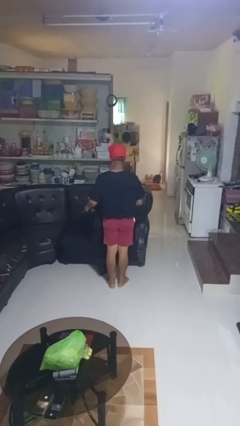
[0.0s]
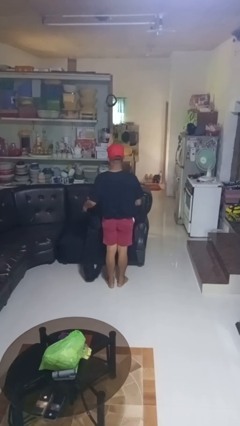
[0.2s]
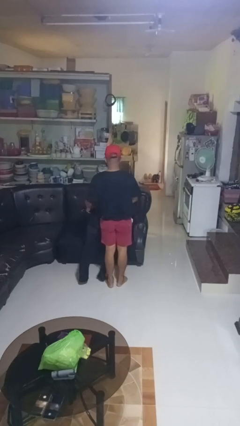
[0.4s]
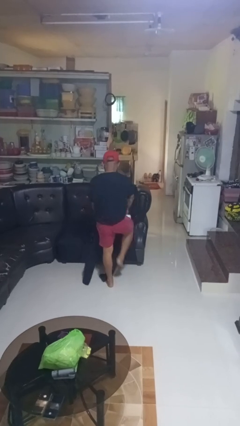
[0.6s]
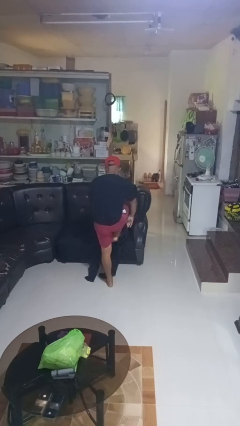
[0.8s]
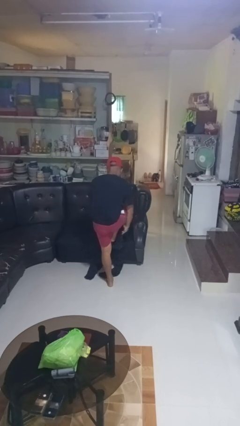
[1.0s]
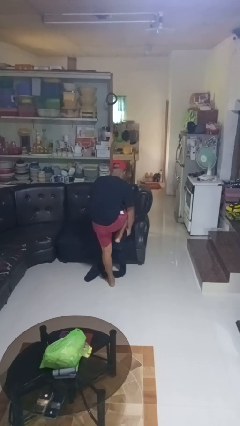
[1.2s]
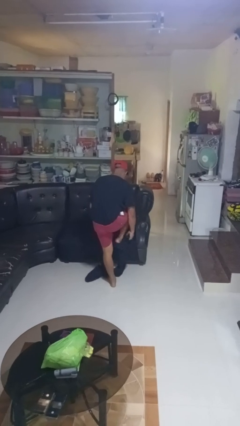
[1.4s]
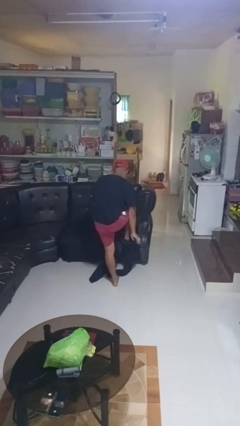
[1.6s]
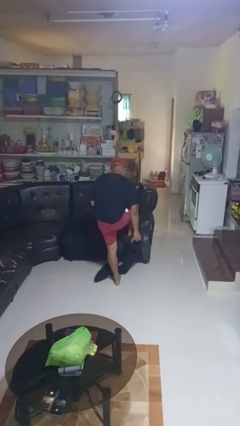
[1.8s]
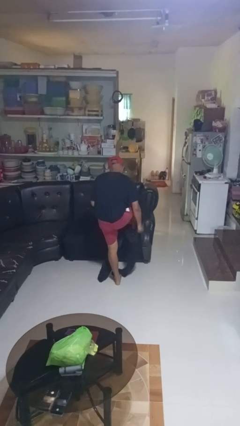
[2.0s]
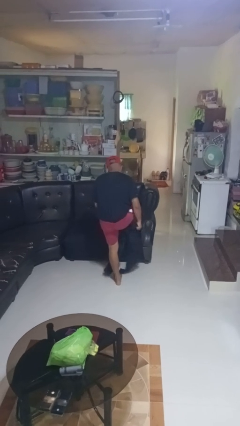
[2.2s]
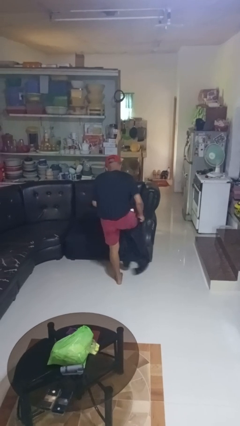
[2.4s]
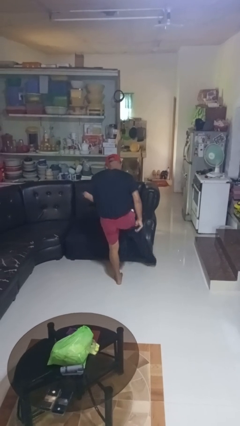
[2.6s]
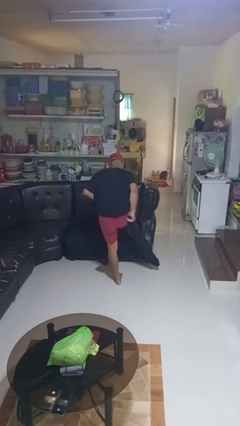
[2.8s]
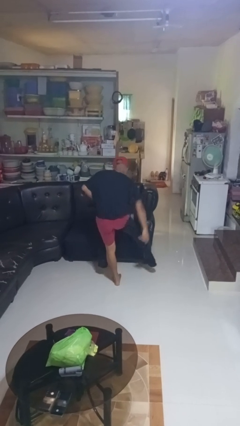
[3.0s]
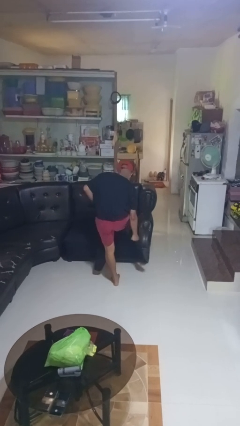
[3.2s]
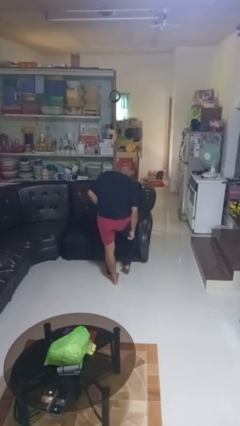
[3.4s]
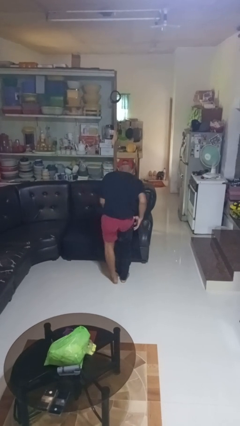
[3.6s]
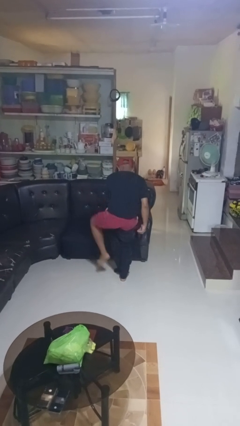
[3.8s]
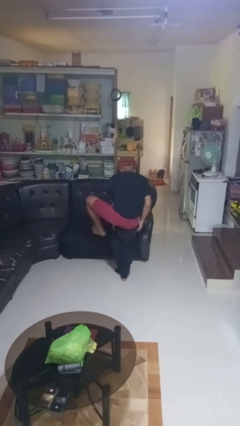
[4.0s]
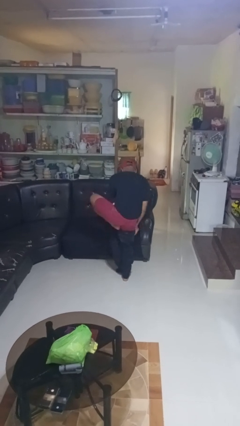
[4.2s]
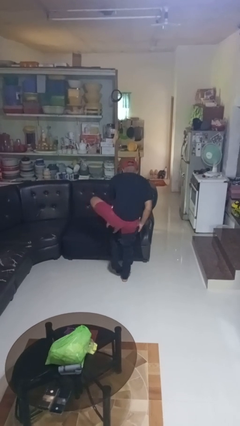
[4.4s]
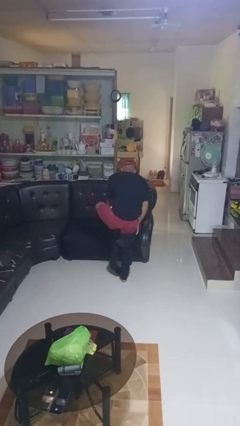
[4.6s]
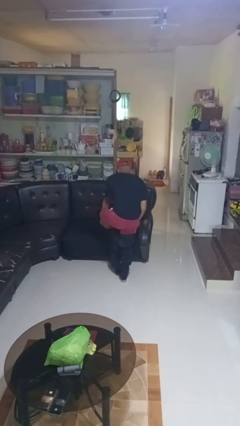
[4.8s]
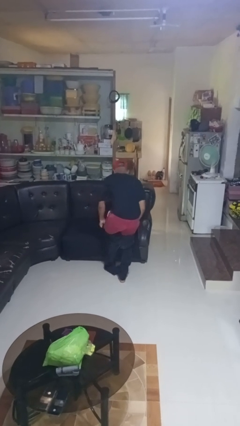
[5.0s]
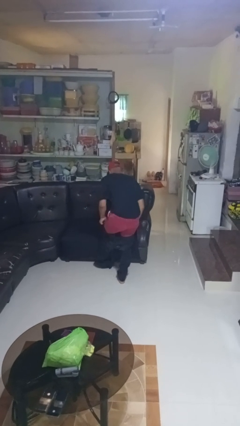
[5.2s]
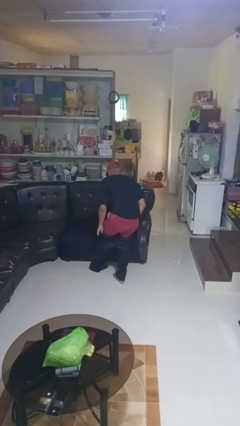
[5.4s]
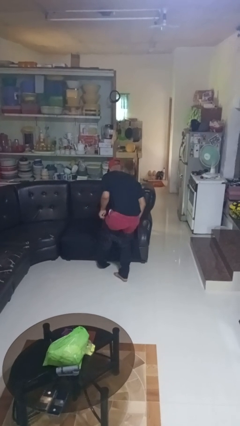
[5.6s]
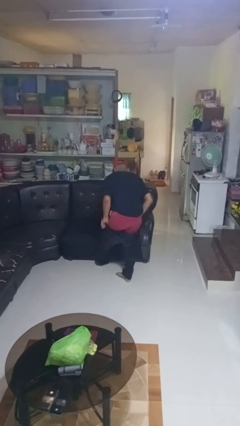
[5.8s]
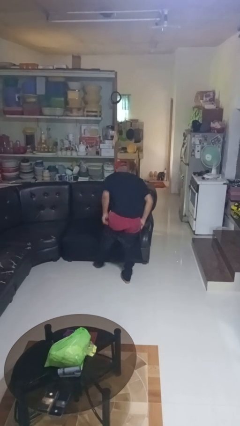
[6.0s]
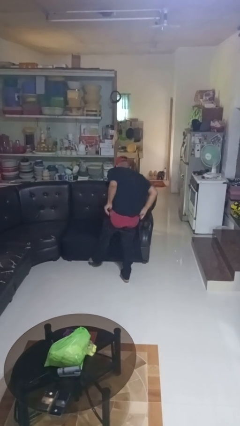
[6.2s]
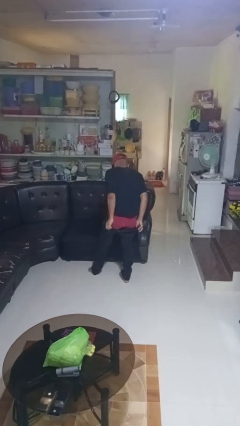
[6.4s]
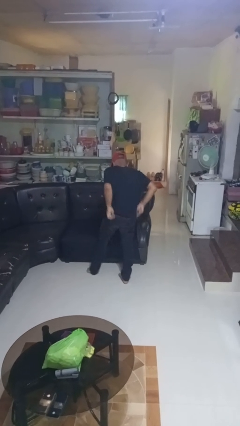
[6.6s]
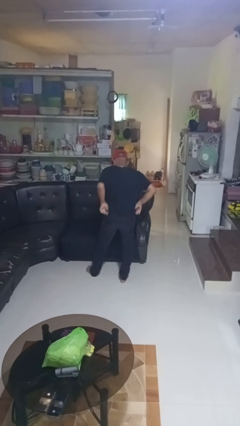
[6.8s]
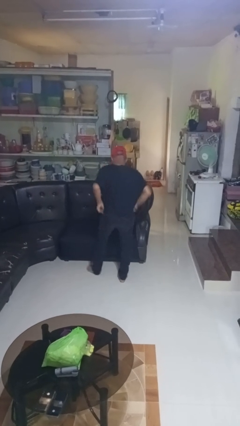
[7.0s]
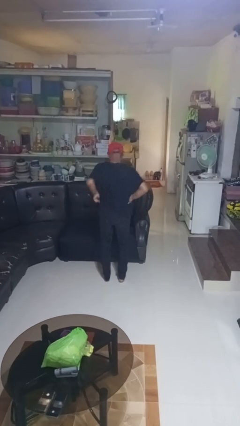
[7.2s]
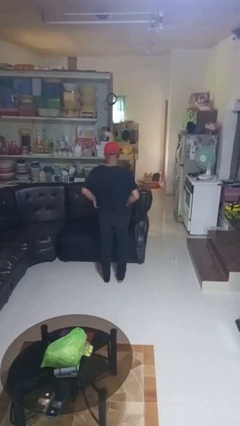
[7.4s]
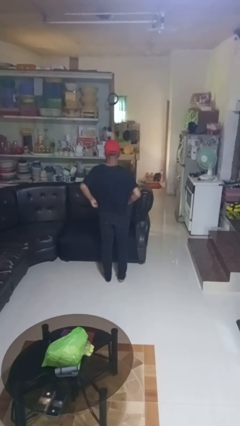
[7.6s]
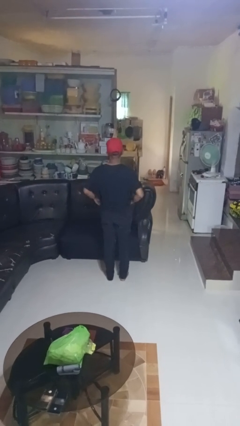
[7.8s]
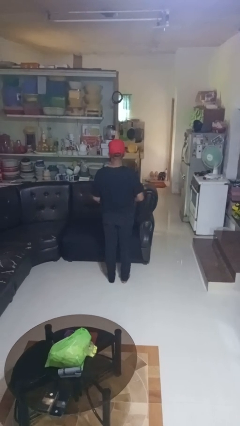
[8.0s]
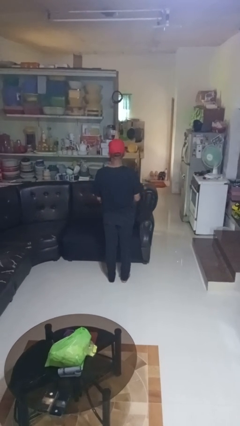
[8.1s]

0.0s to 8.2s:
person puts on pants

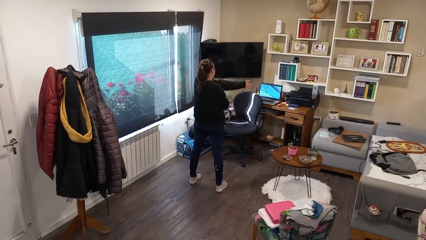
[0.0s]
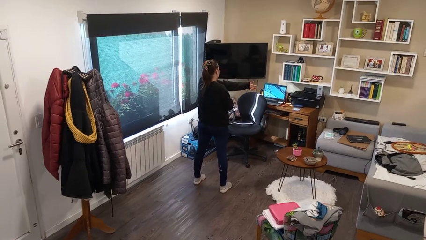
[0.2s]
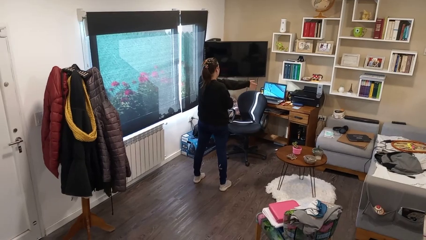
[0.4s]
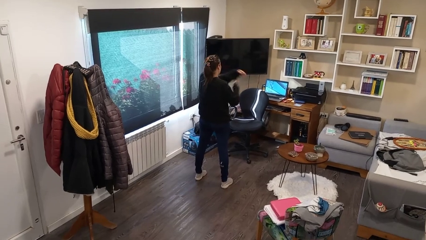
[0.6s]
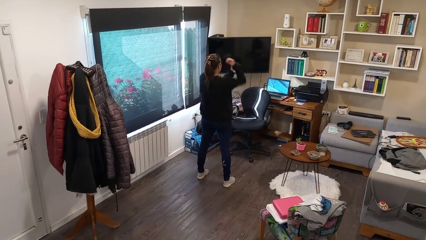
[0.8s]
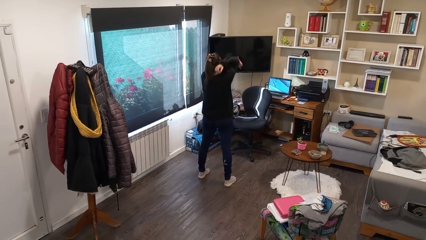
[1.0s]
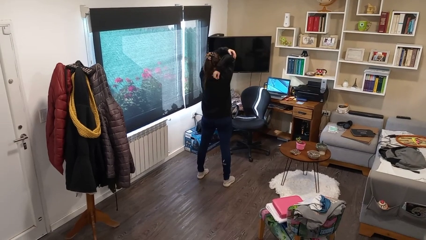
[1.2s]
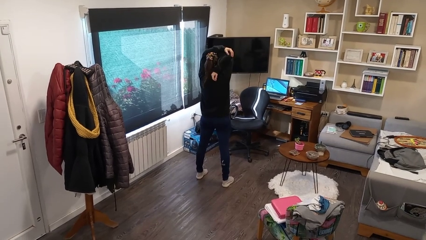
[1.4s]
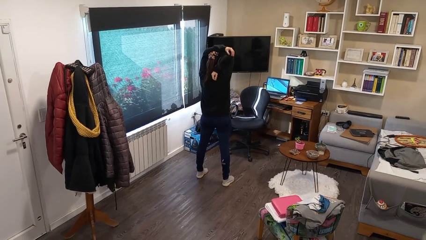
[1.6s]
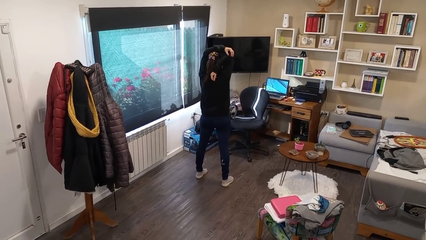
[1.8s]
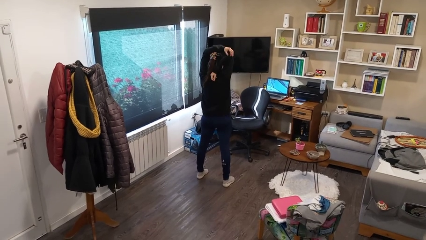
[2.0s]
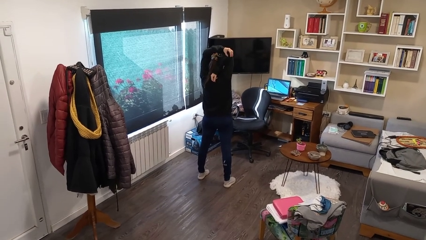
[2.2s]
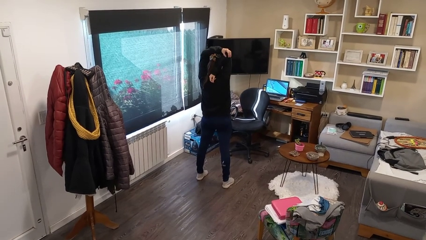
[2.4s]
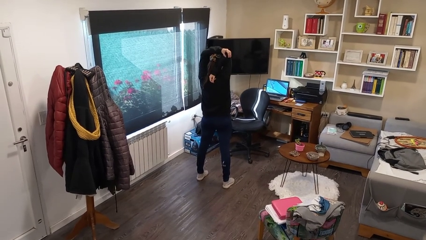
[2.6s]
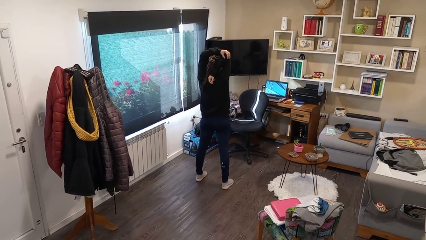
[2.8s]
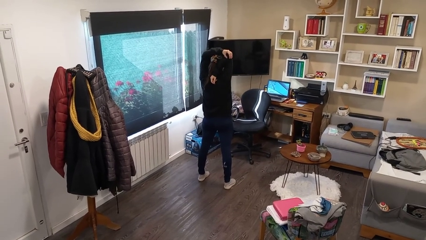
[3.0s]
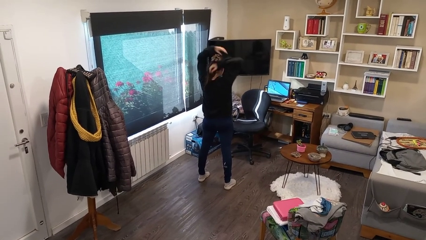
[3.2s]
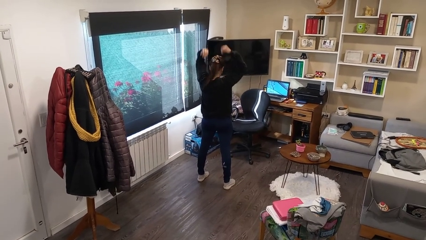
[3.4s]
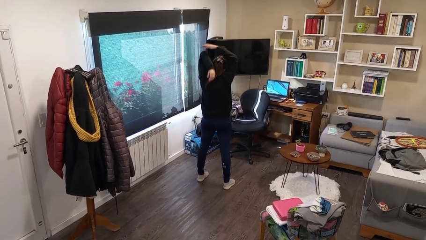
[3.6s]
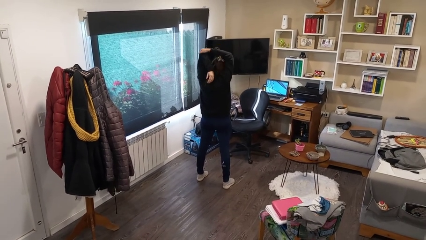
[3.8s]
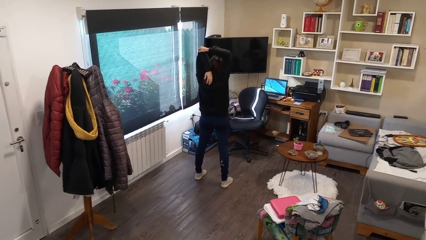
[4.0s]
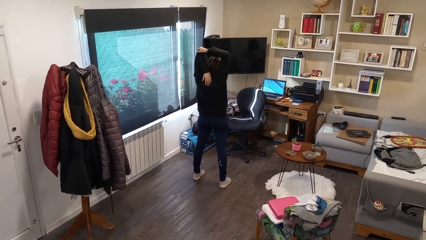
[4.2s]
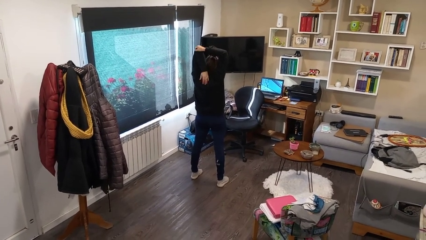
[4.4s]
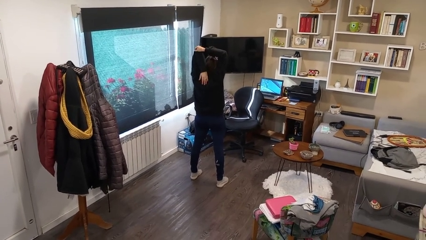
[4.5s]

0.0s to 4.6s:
person stretches arms over head

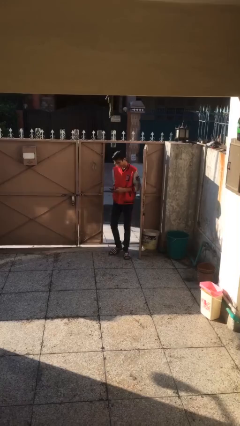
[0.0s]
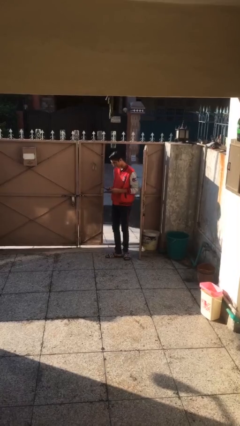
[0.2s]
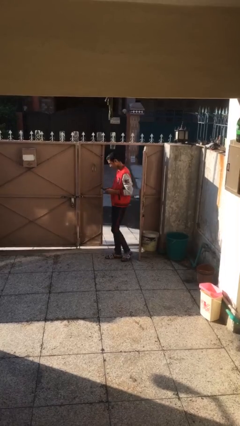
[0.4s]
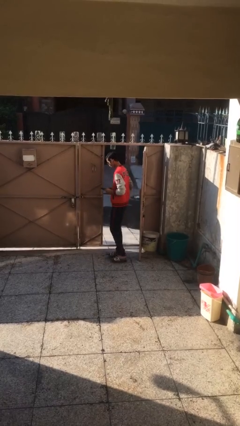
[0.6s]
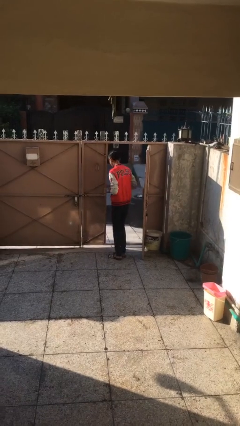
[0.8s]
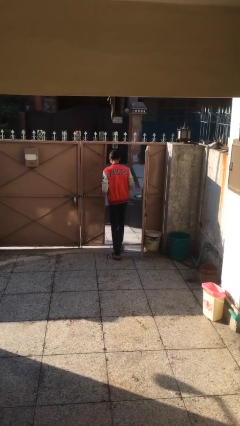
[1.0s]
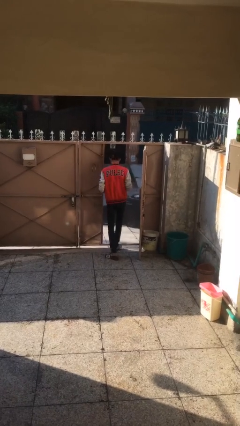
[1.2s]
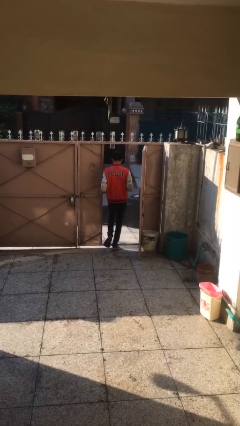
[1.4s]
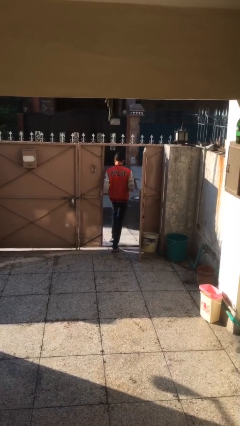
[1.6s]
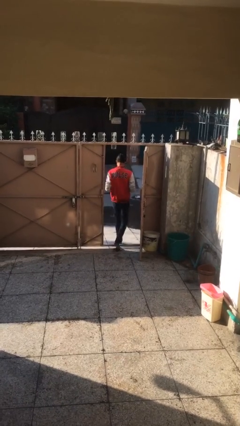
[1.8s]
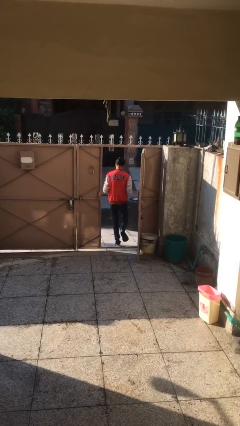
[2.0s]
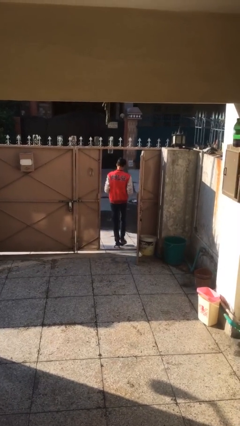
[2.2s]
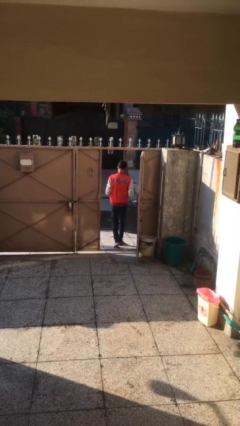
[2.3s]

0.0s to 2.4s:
person exits scene through structure

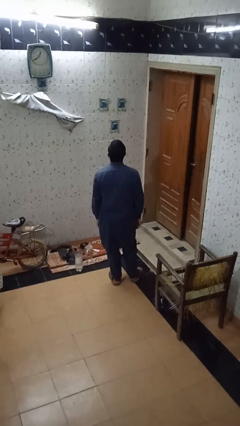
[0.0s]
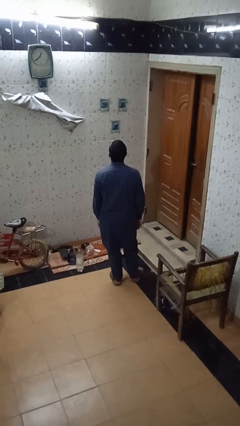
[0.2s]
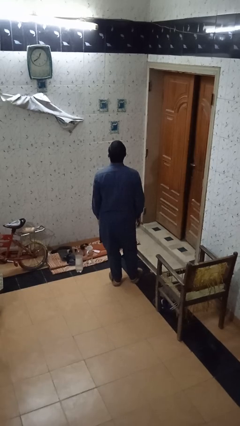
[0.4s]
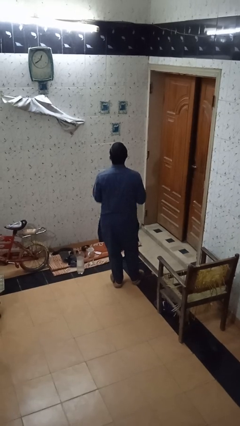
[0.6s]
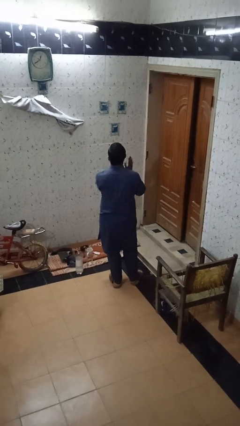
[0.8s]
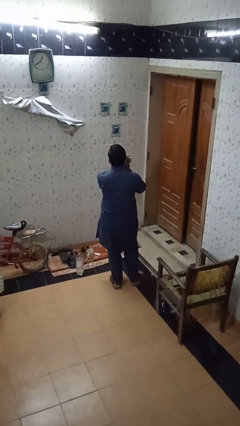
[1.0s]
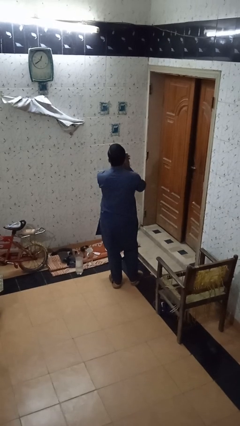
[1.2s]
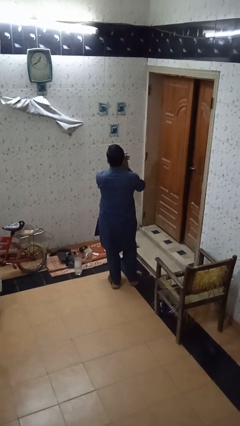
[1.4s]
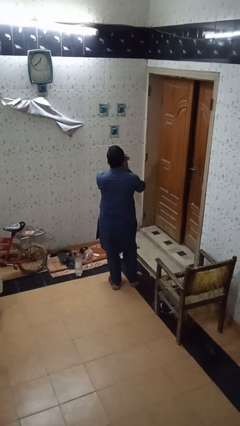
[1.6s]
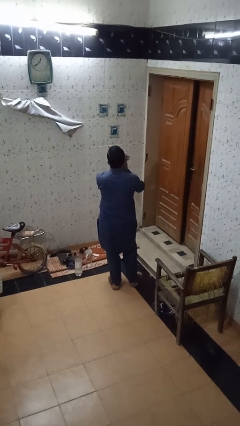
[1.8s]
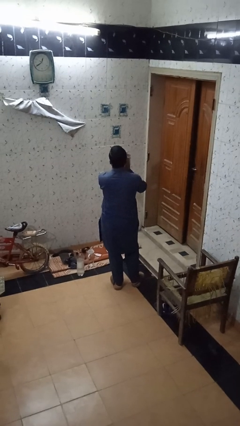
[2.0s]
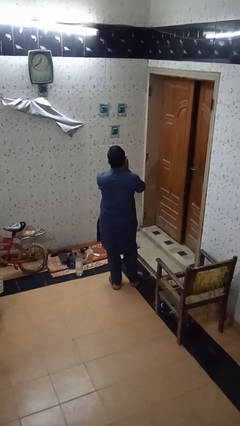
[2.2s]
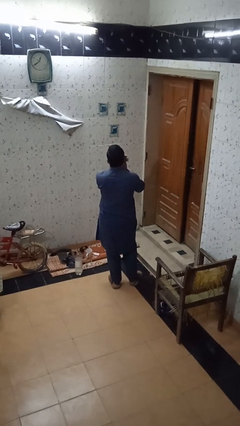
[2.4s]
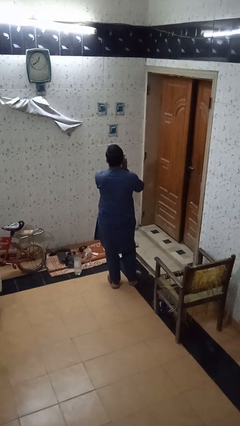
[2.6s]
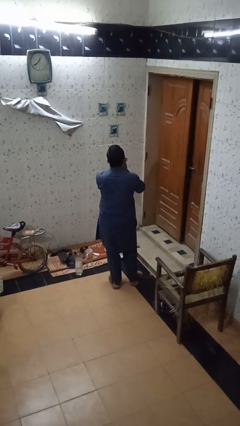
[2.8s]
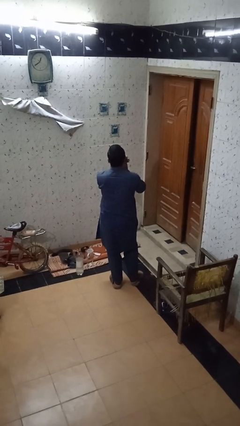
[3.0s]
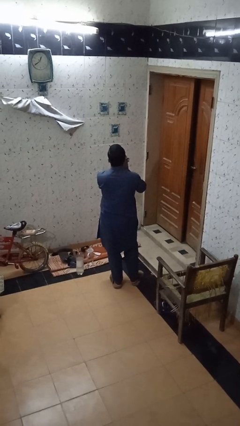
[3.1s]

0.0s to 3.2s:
person claps hands
